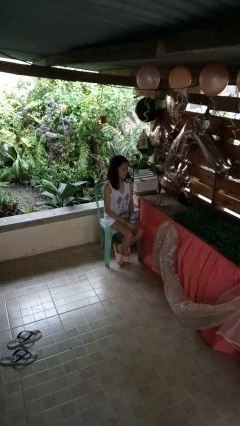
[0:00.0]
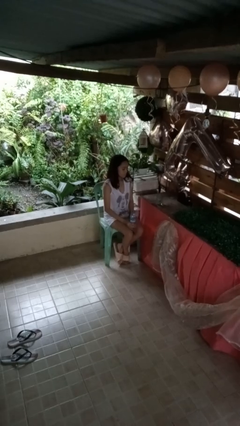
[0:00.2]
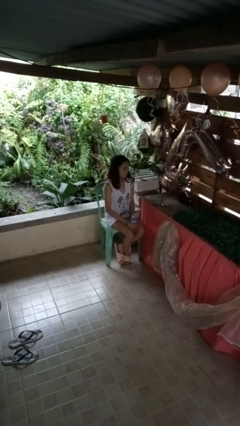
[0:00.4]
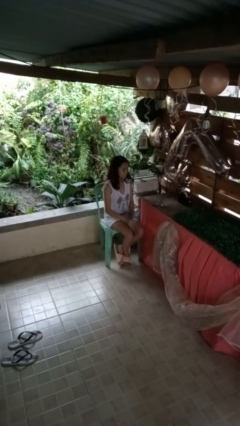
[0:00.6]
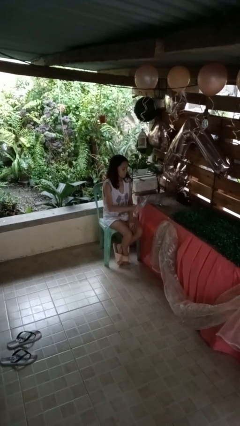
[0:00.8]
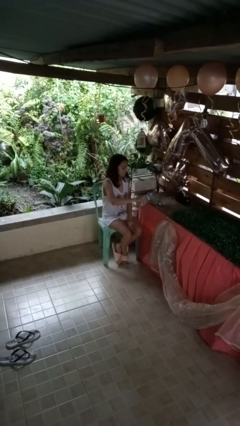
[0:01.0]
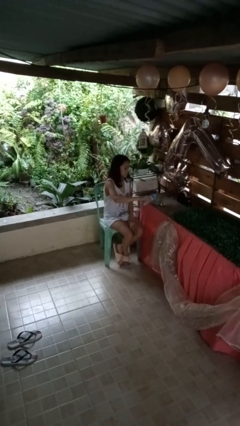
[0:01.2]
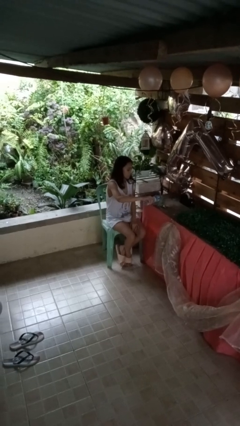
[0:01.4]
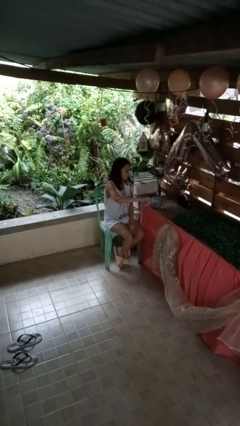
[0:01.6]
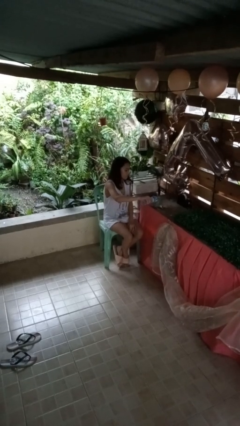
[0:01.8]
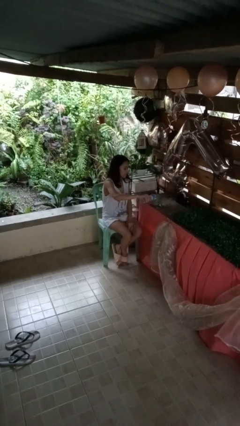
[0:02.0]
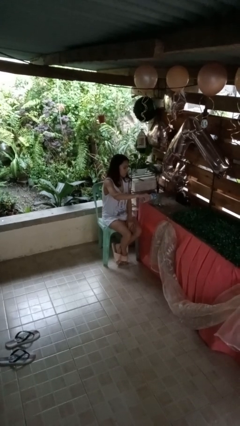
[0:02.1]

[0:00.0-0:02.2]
person pours liquid into cup

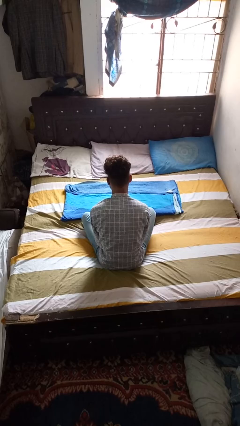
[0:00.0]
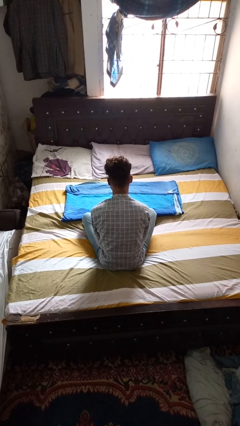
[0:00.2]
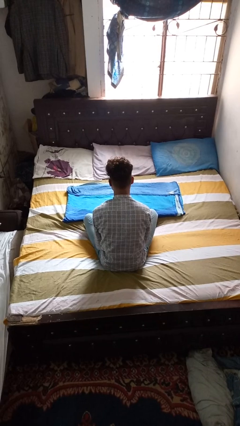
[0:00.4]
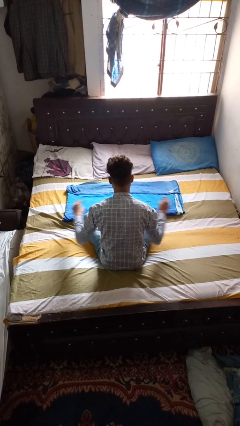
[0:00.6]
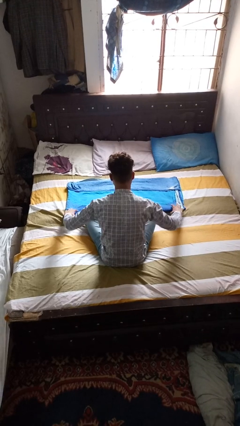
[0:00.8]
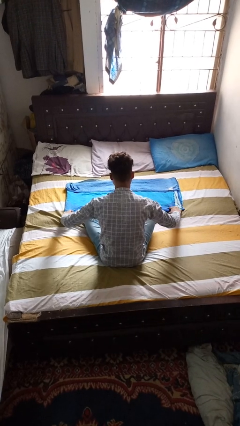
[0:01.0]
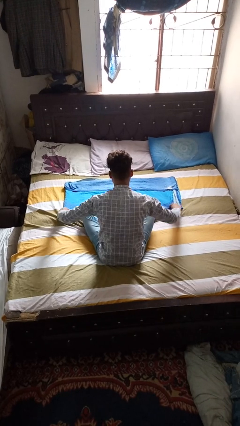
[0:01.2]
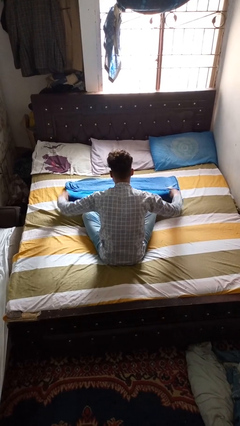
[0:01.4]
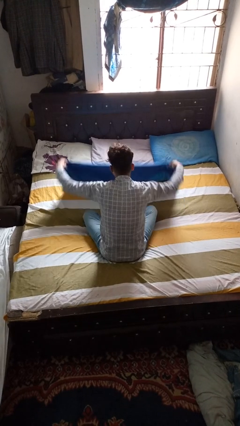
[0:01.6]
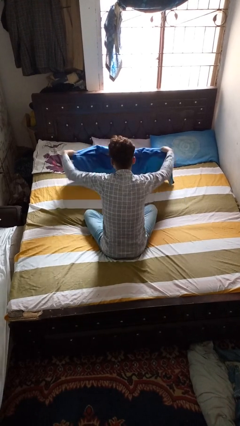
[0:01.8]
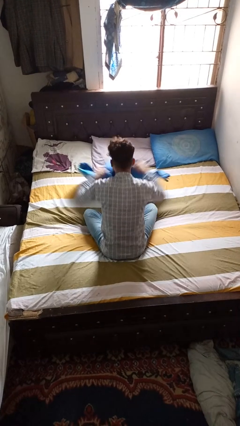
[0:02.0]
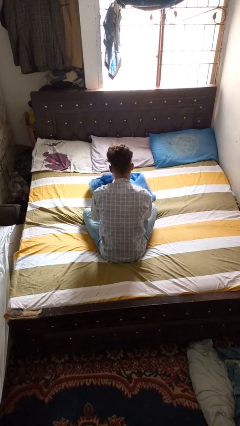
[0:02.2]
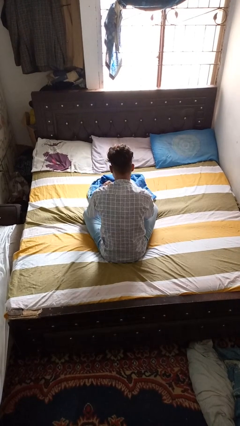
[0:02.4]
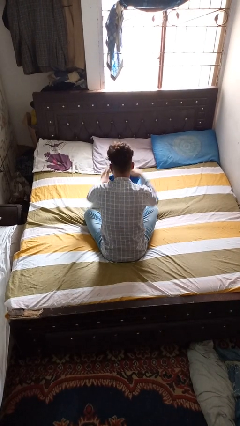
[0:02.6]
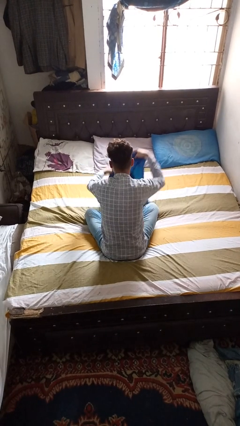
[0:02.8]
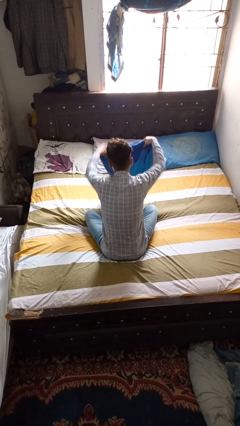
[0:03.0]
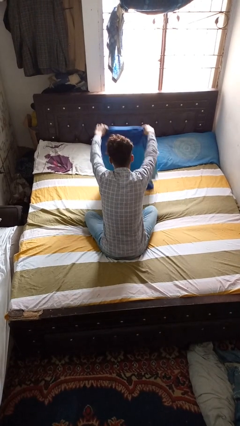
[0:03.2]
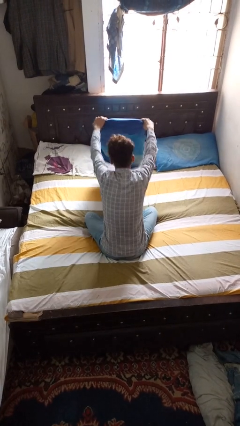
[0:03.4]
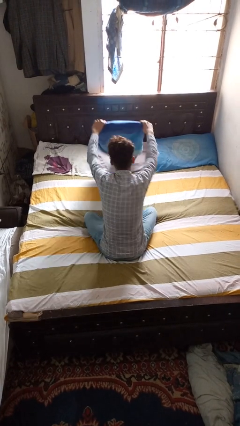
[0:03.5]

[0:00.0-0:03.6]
person folds blanket

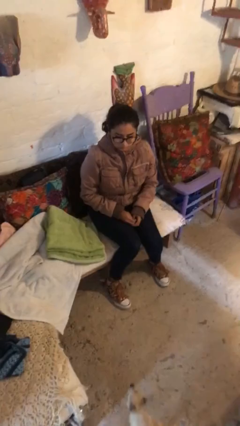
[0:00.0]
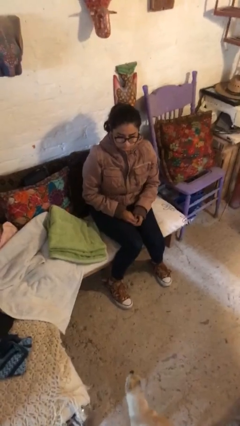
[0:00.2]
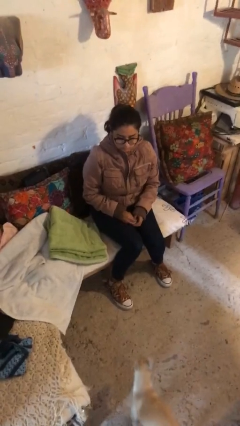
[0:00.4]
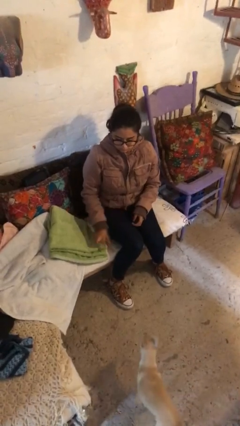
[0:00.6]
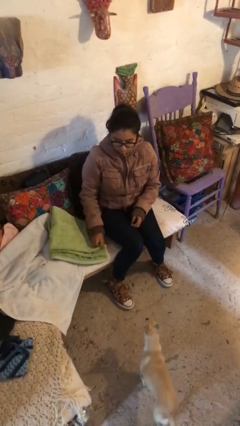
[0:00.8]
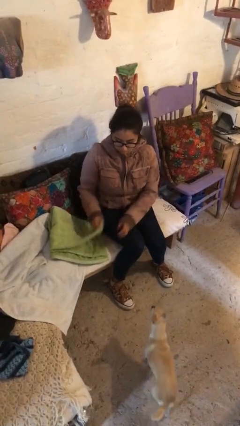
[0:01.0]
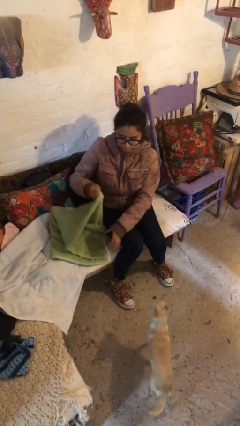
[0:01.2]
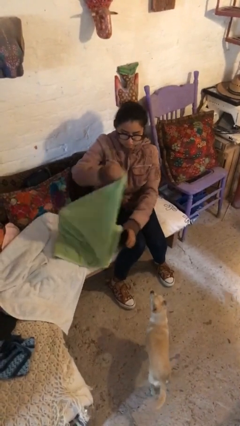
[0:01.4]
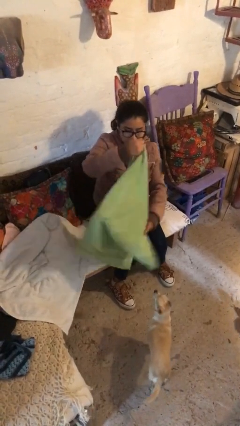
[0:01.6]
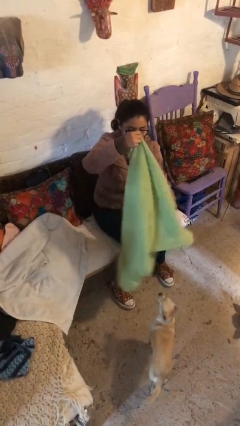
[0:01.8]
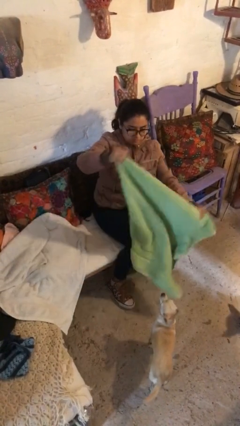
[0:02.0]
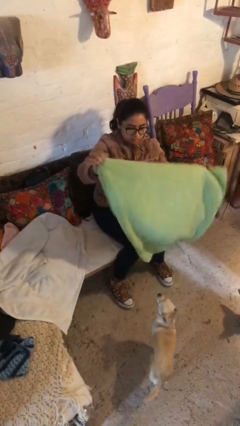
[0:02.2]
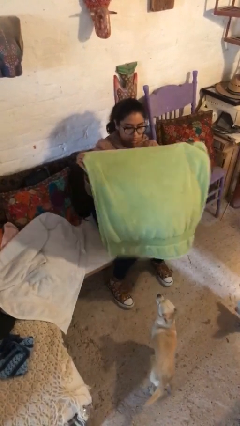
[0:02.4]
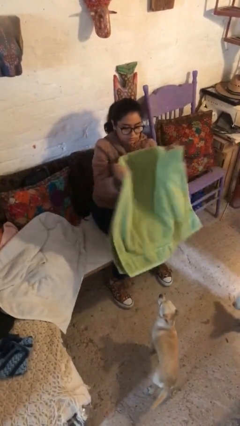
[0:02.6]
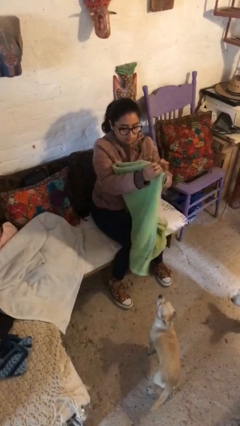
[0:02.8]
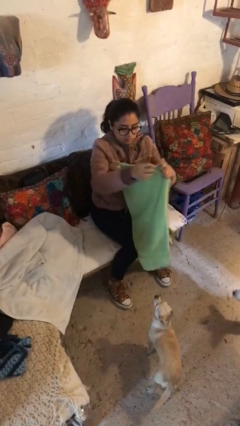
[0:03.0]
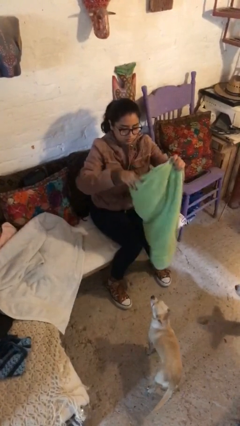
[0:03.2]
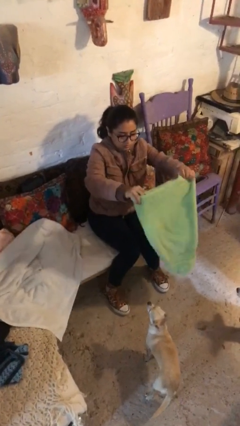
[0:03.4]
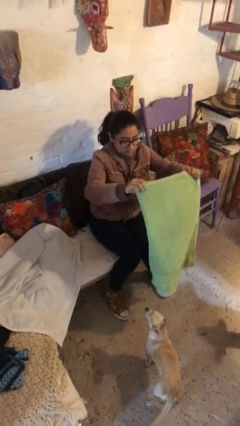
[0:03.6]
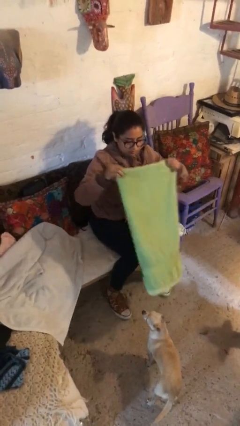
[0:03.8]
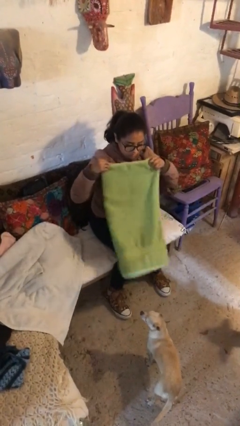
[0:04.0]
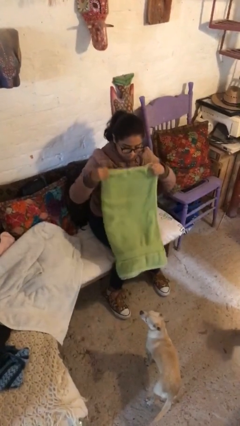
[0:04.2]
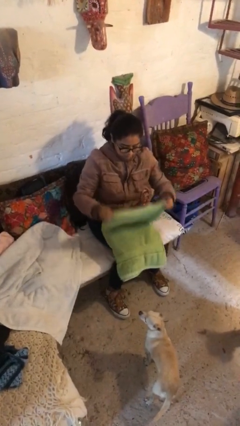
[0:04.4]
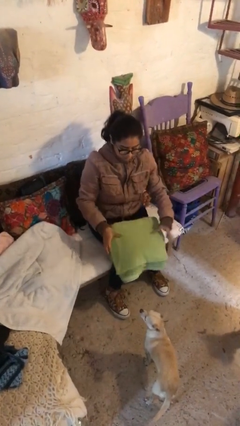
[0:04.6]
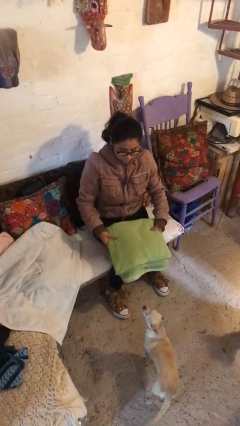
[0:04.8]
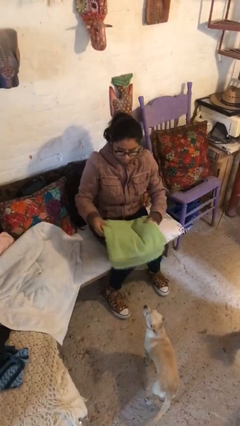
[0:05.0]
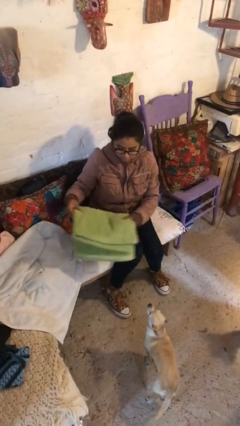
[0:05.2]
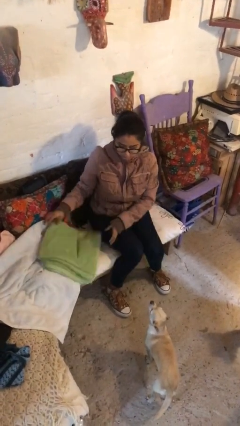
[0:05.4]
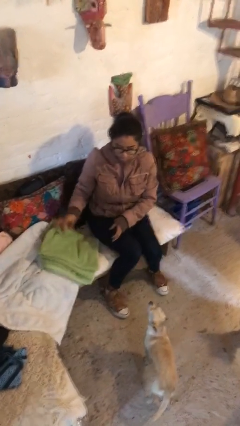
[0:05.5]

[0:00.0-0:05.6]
person folds towel

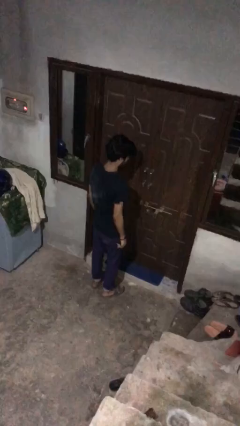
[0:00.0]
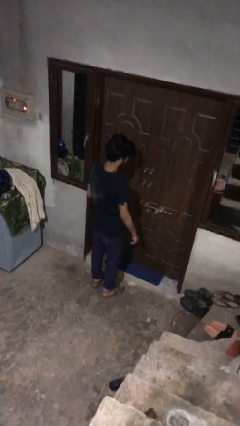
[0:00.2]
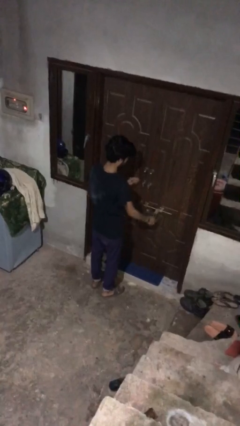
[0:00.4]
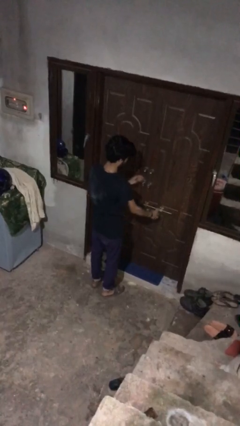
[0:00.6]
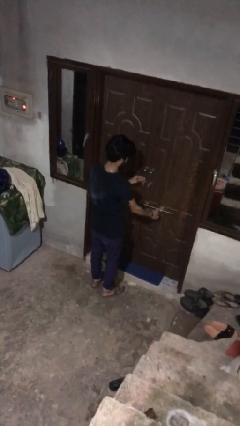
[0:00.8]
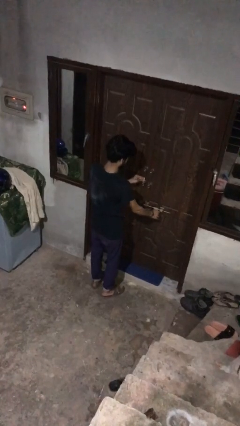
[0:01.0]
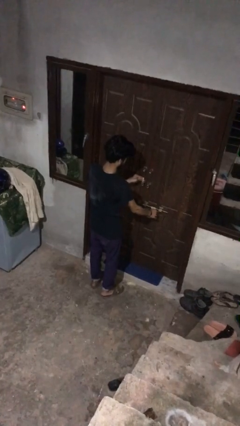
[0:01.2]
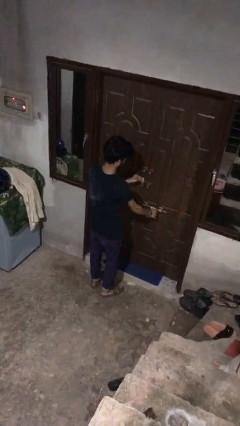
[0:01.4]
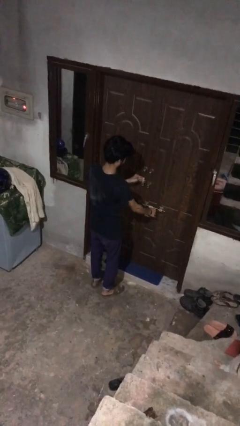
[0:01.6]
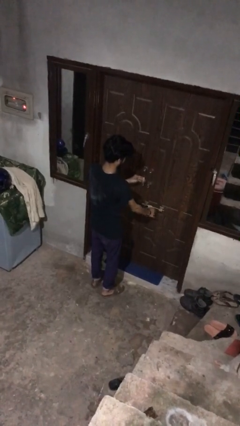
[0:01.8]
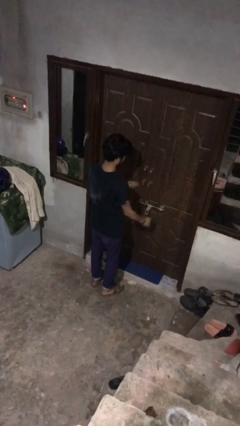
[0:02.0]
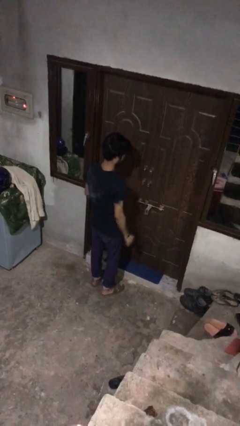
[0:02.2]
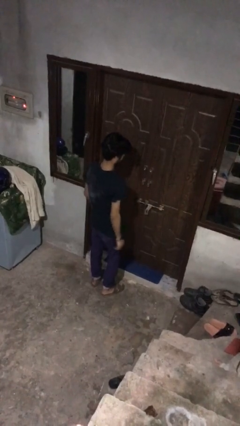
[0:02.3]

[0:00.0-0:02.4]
person locks door with keys

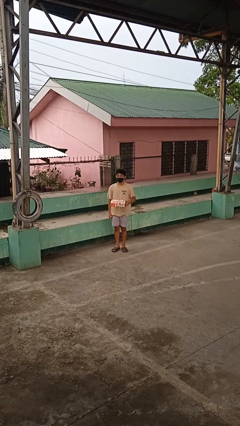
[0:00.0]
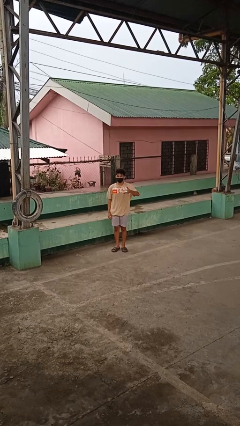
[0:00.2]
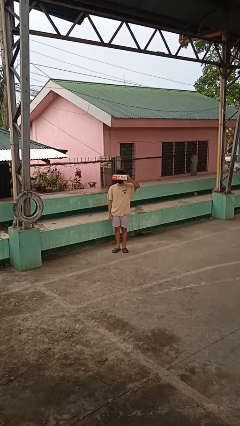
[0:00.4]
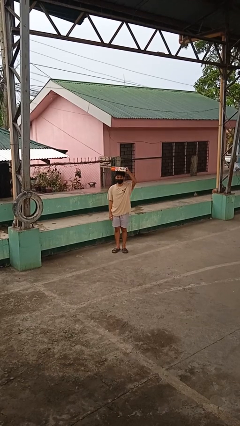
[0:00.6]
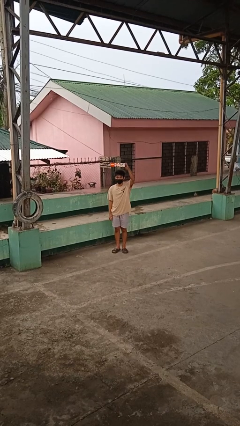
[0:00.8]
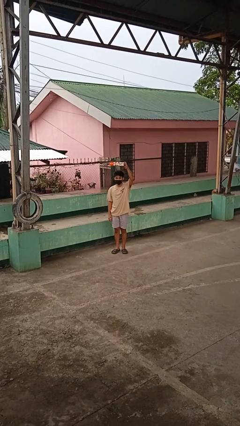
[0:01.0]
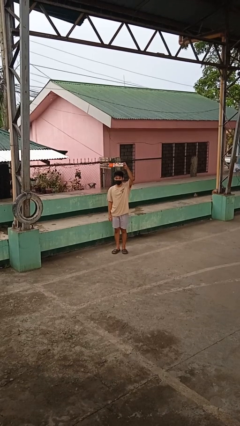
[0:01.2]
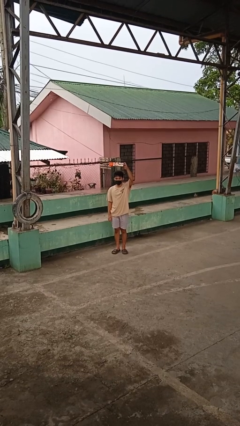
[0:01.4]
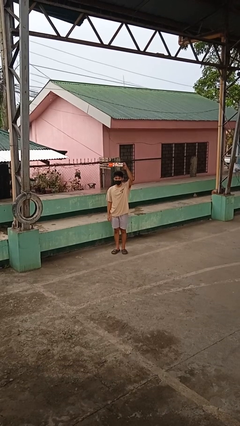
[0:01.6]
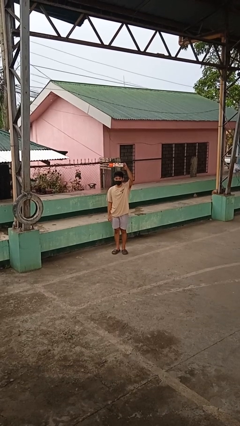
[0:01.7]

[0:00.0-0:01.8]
person holds object above head

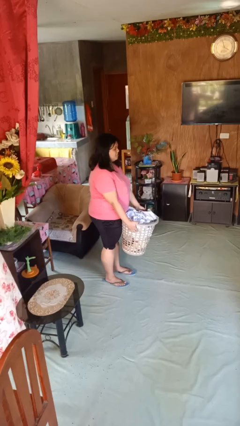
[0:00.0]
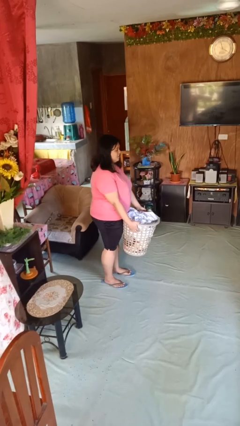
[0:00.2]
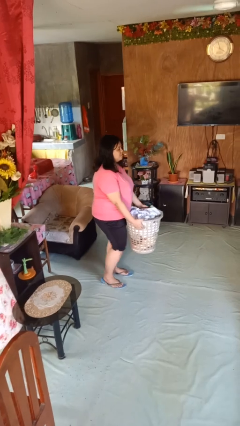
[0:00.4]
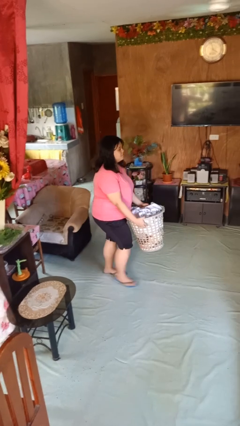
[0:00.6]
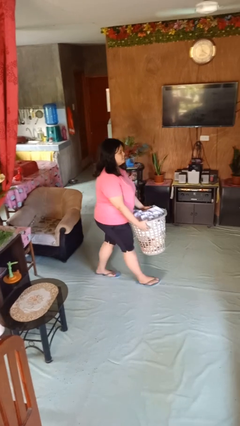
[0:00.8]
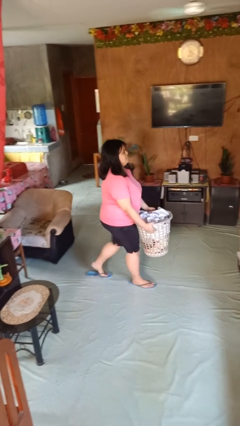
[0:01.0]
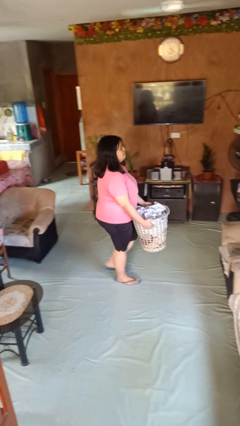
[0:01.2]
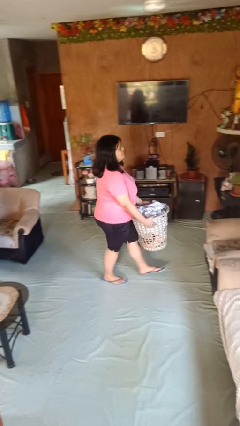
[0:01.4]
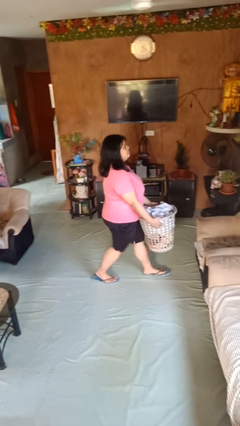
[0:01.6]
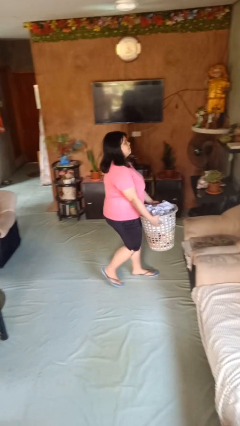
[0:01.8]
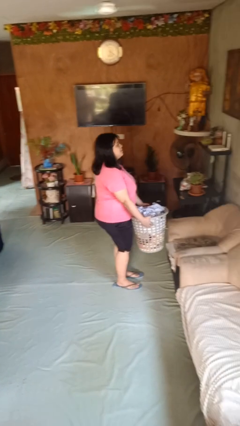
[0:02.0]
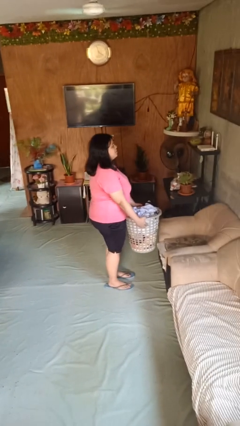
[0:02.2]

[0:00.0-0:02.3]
person carries laundry basket
